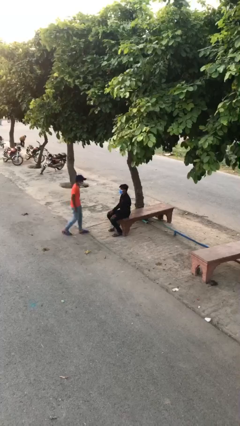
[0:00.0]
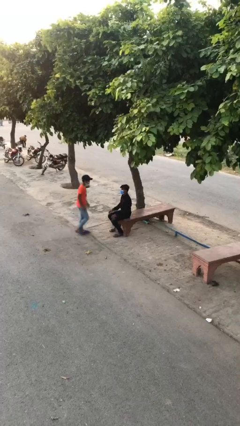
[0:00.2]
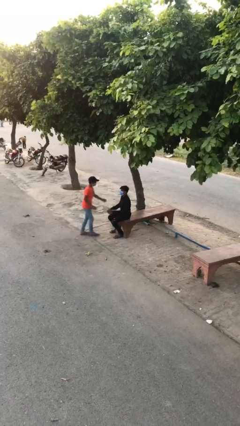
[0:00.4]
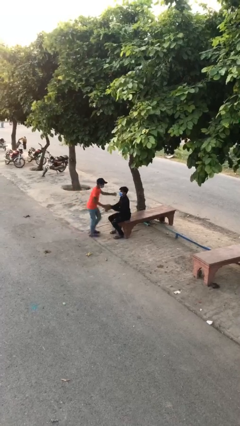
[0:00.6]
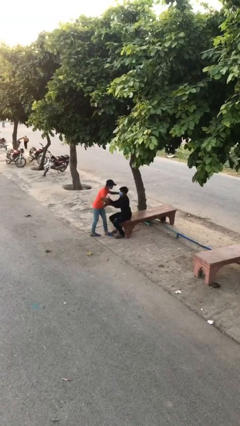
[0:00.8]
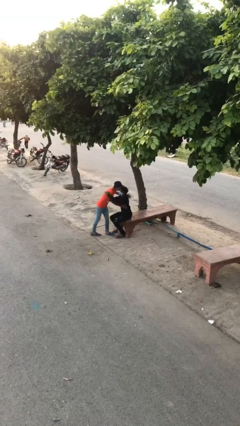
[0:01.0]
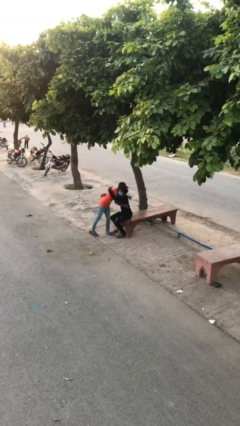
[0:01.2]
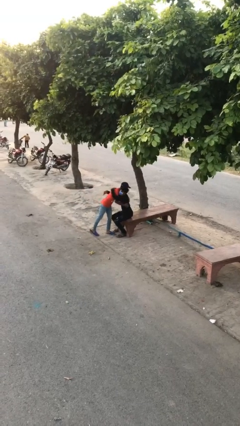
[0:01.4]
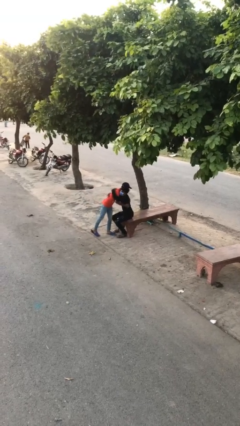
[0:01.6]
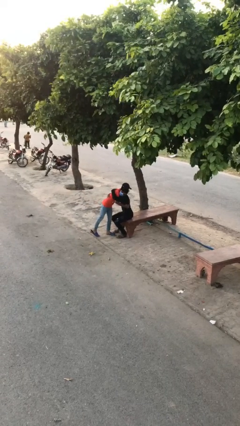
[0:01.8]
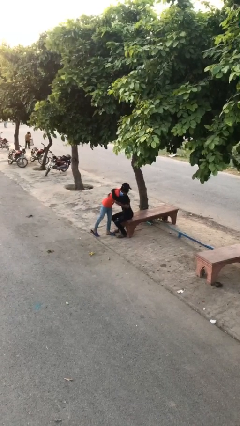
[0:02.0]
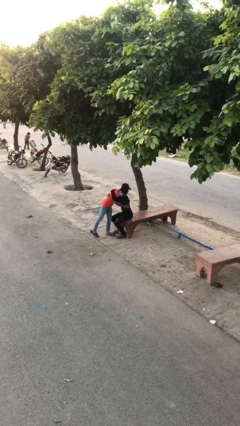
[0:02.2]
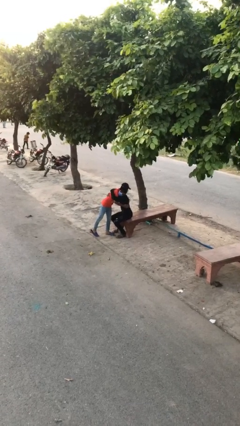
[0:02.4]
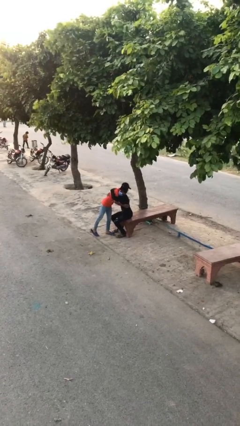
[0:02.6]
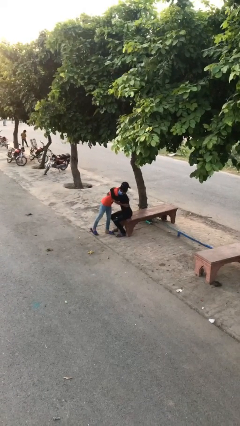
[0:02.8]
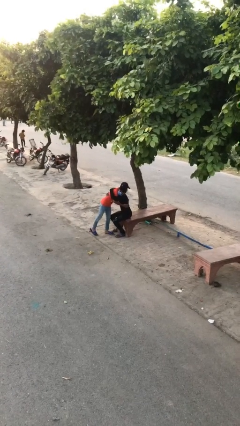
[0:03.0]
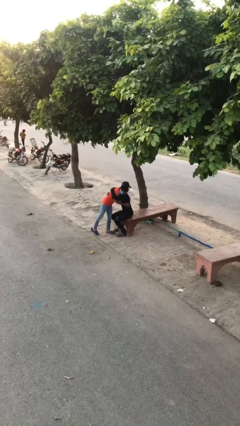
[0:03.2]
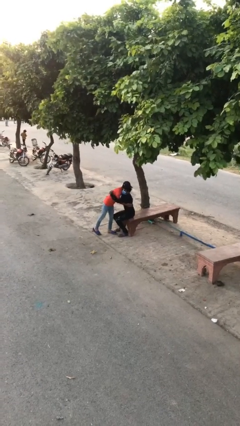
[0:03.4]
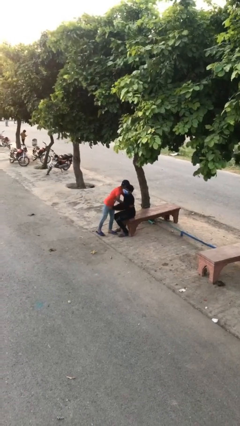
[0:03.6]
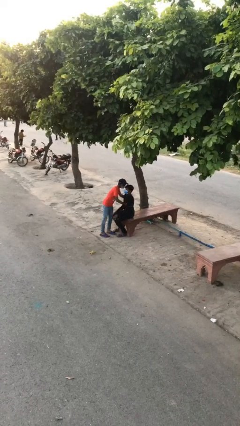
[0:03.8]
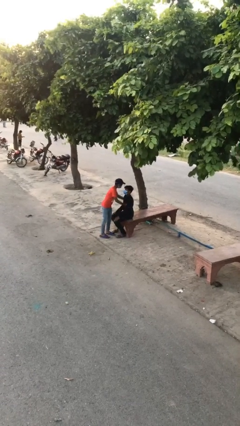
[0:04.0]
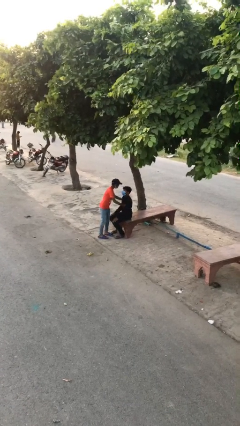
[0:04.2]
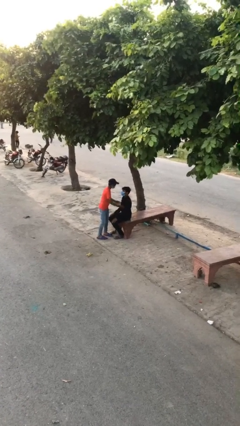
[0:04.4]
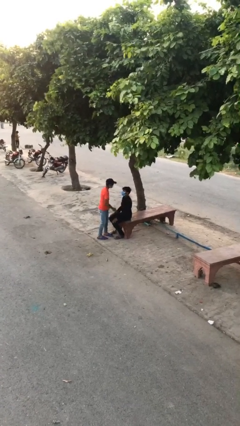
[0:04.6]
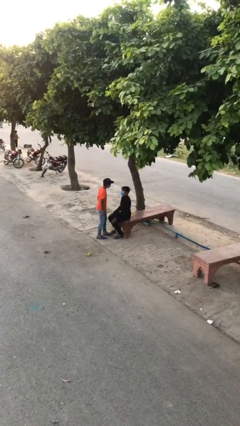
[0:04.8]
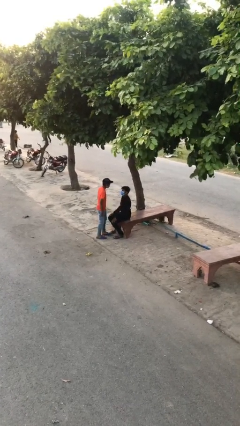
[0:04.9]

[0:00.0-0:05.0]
person embraces person

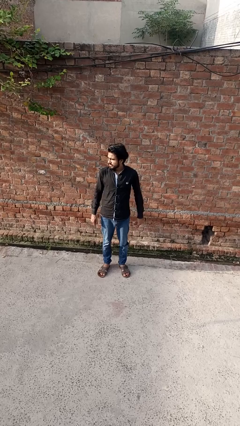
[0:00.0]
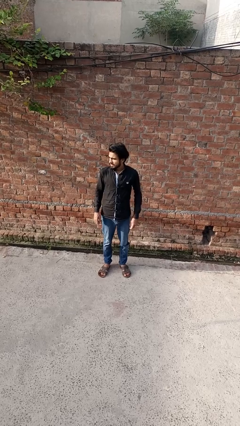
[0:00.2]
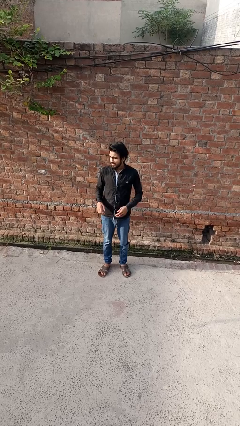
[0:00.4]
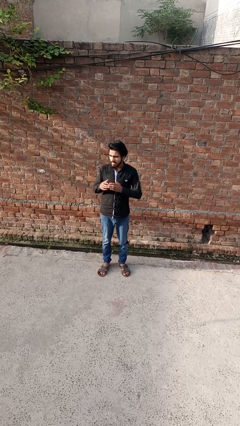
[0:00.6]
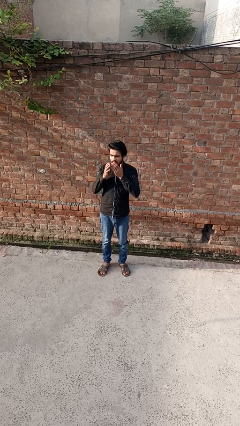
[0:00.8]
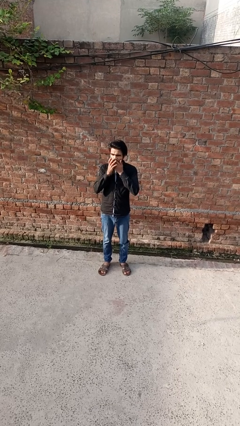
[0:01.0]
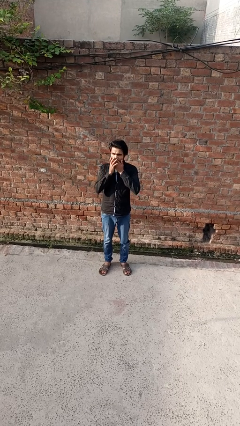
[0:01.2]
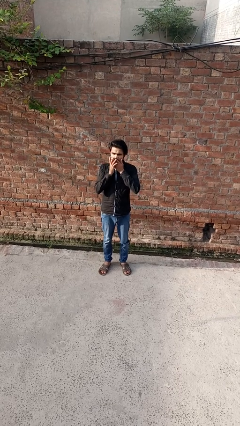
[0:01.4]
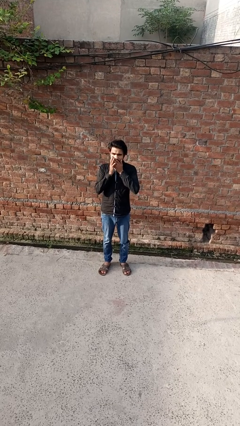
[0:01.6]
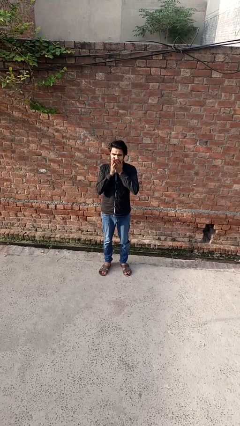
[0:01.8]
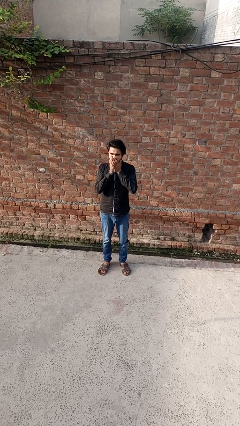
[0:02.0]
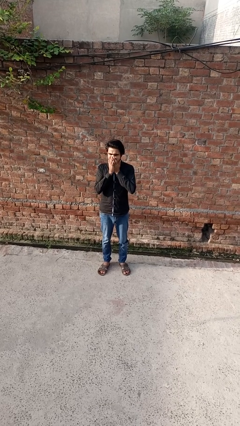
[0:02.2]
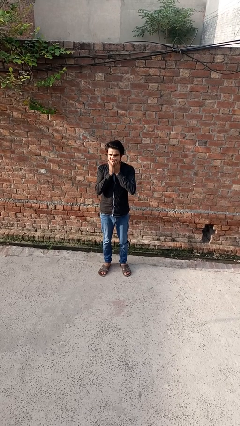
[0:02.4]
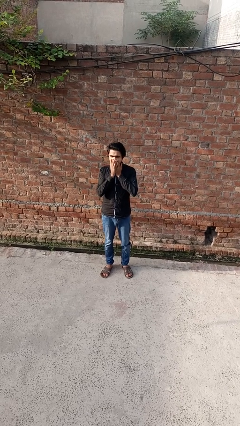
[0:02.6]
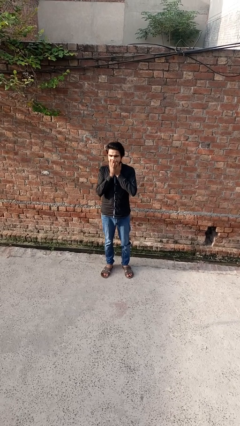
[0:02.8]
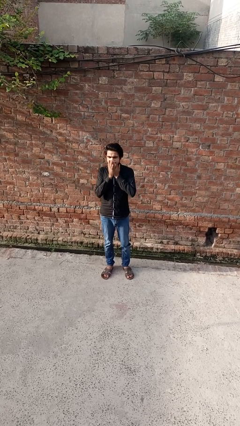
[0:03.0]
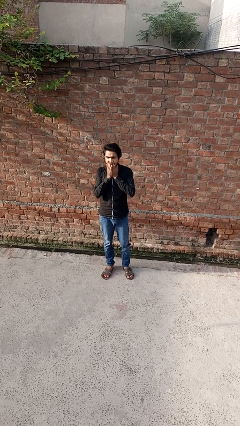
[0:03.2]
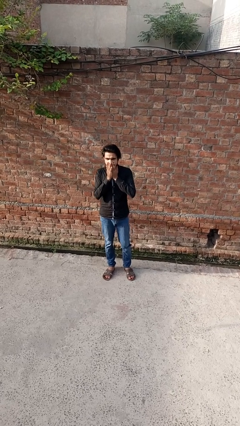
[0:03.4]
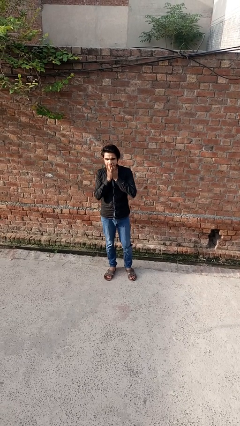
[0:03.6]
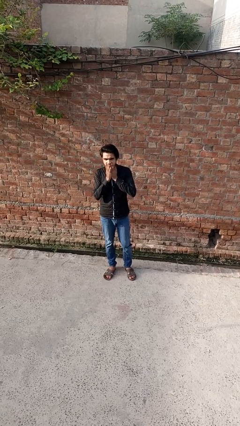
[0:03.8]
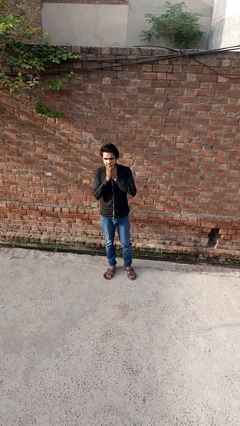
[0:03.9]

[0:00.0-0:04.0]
person yawns

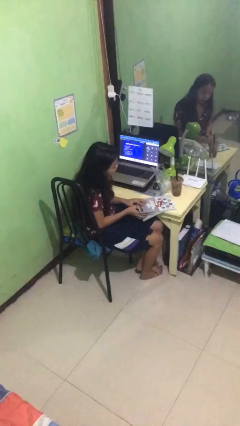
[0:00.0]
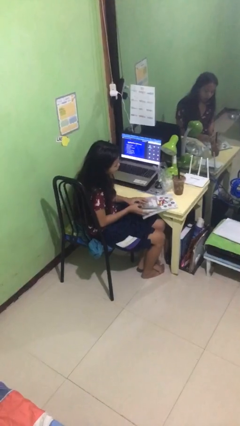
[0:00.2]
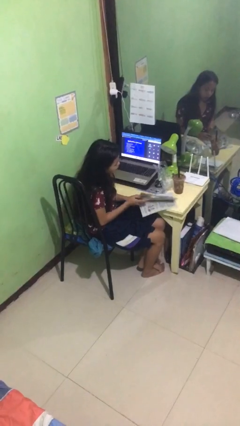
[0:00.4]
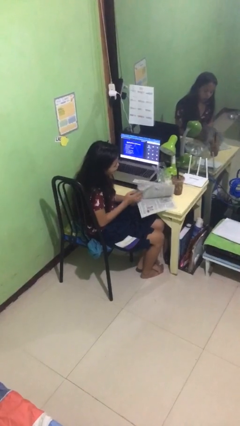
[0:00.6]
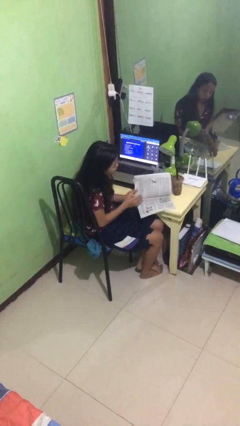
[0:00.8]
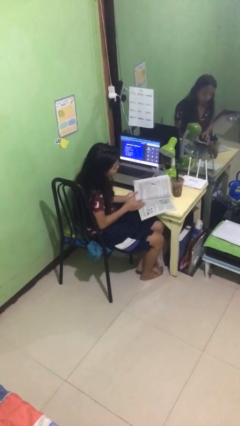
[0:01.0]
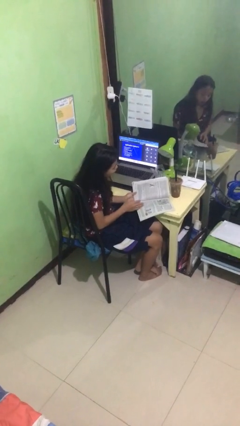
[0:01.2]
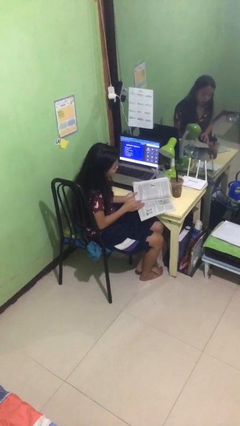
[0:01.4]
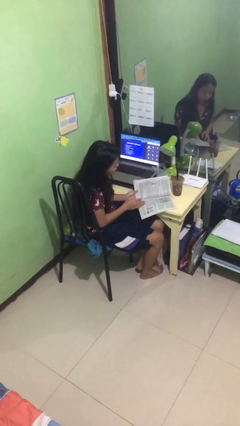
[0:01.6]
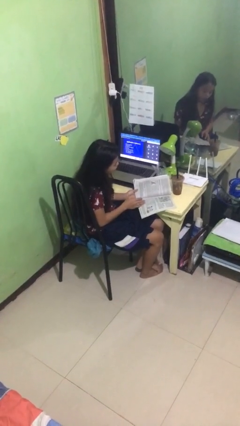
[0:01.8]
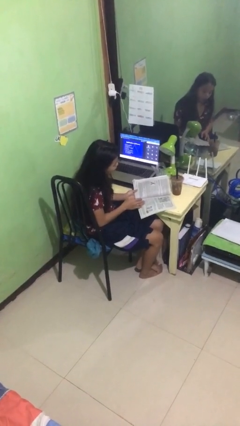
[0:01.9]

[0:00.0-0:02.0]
person reads document

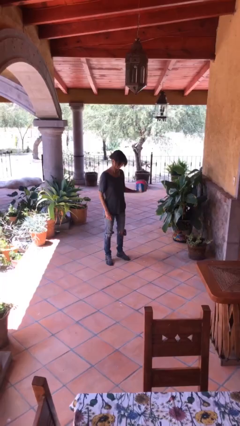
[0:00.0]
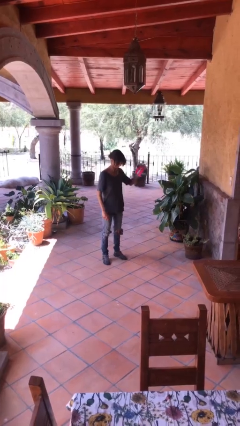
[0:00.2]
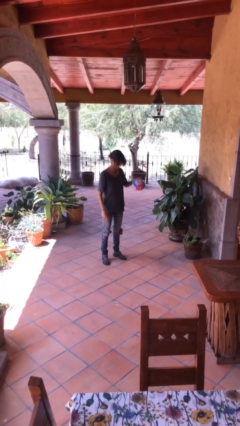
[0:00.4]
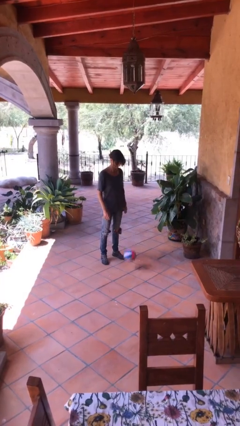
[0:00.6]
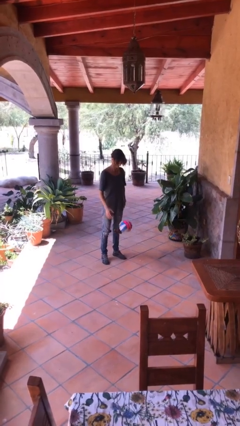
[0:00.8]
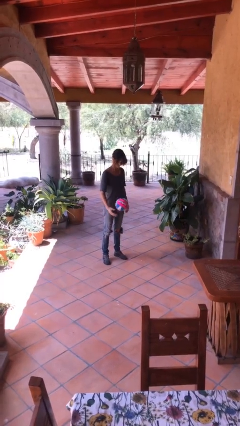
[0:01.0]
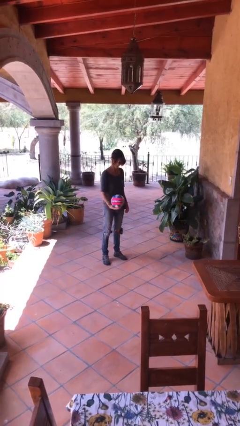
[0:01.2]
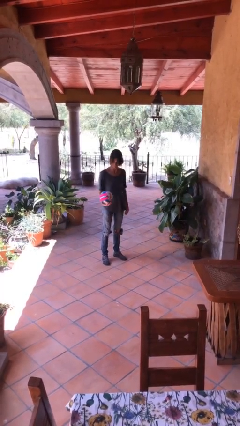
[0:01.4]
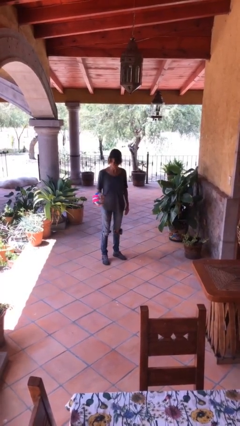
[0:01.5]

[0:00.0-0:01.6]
person bounces ball on floor

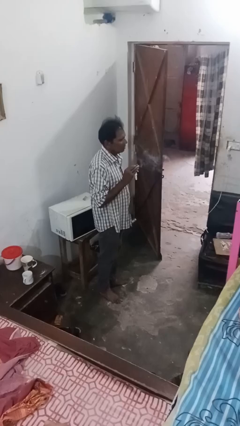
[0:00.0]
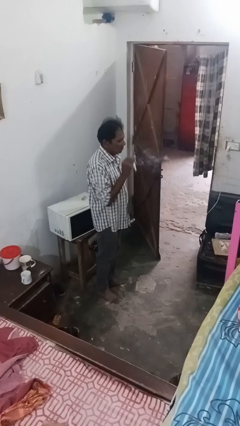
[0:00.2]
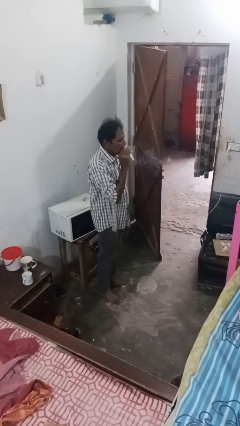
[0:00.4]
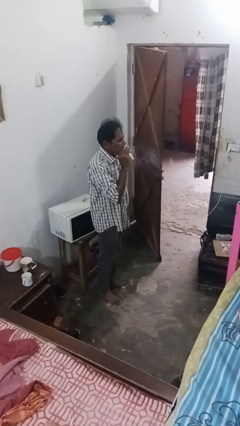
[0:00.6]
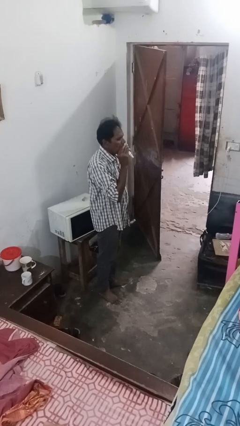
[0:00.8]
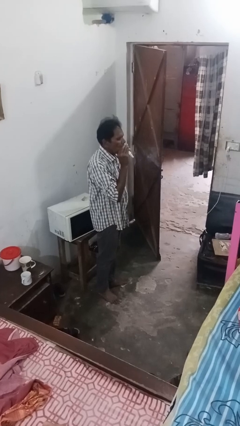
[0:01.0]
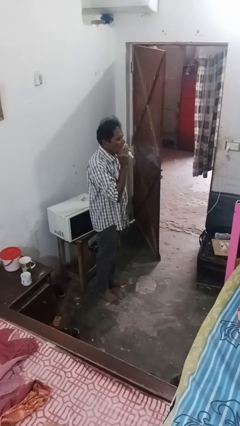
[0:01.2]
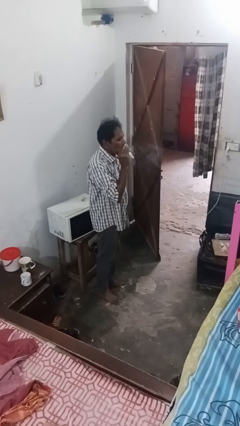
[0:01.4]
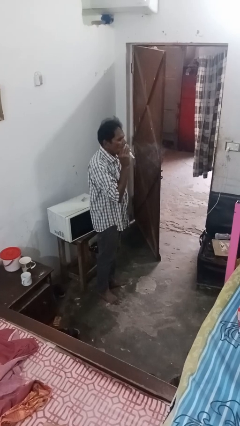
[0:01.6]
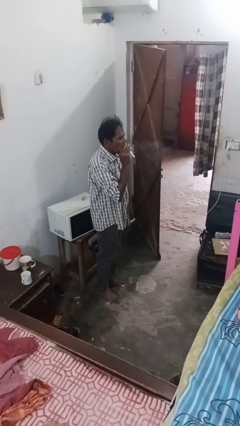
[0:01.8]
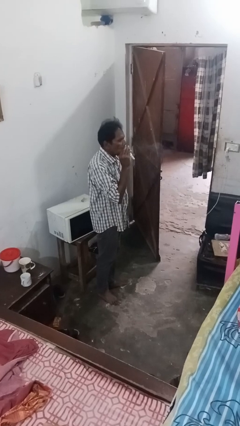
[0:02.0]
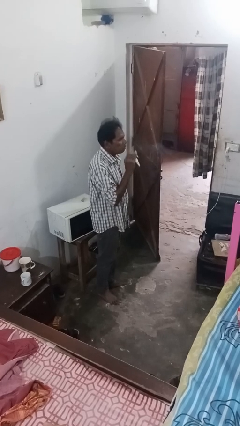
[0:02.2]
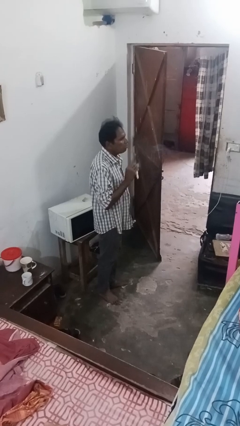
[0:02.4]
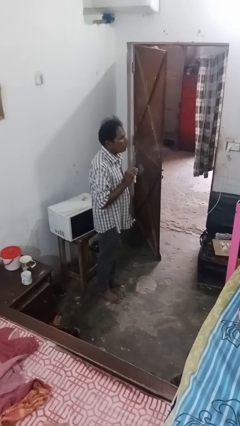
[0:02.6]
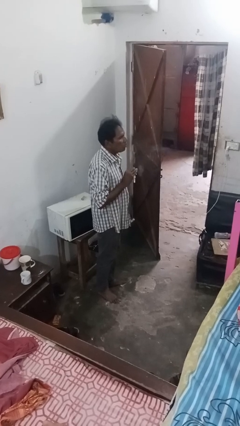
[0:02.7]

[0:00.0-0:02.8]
person vapes

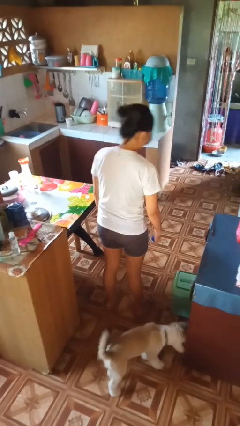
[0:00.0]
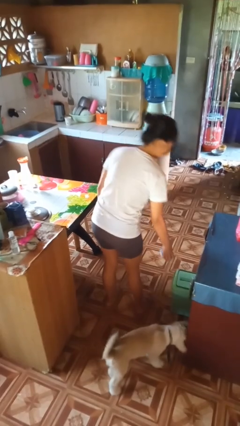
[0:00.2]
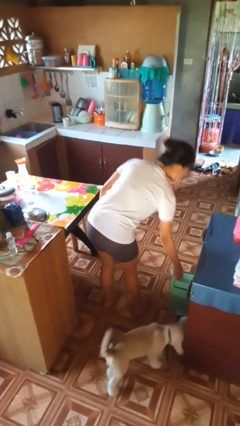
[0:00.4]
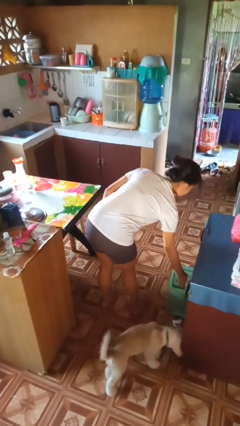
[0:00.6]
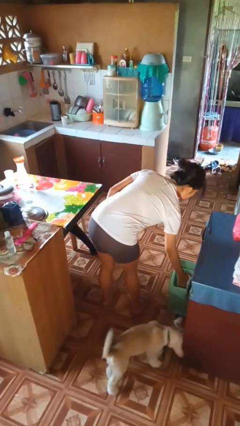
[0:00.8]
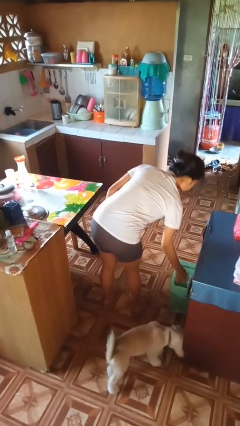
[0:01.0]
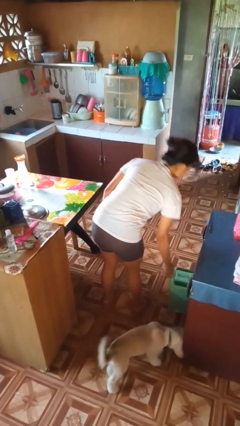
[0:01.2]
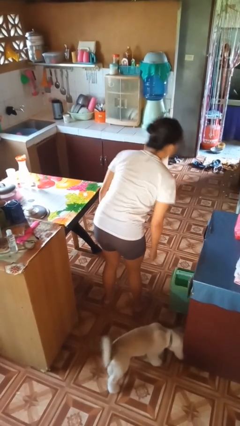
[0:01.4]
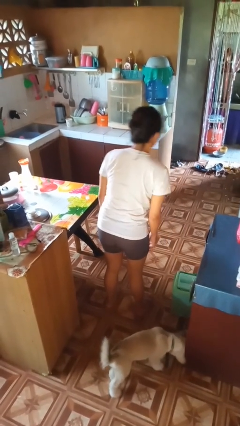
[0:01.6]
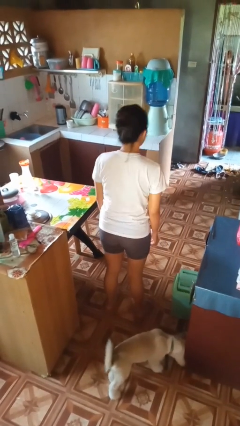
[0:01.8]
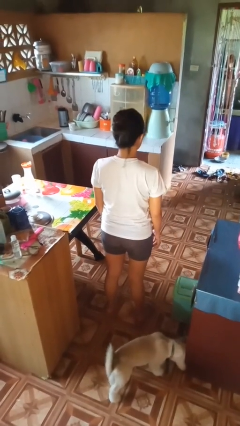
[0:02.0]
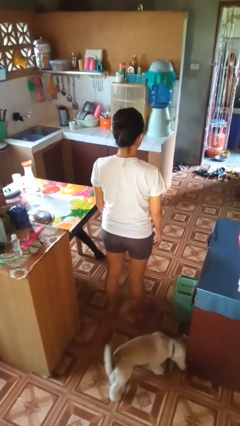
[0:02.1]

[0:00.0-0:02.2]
person discards trash
